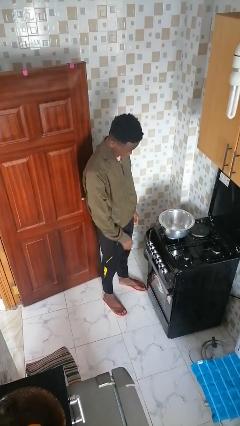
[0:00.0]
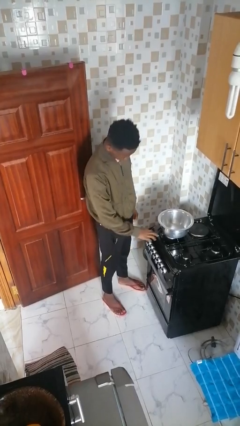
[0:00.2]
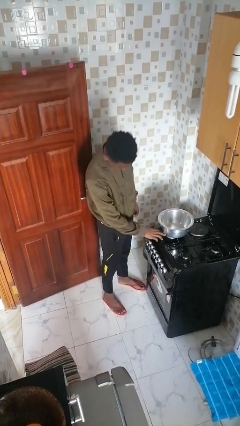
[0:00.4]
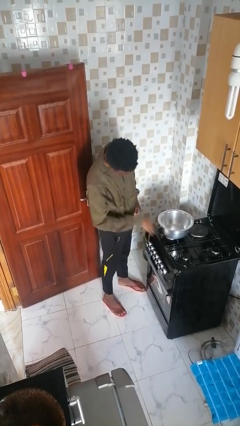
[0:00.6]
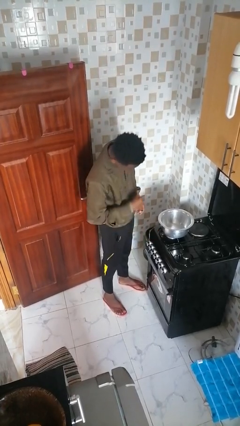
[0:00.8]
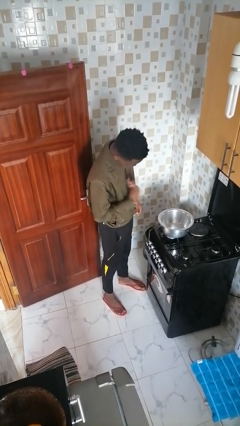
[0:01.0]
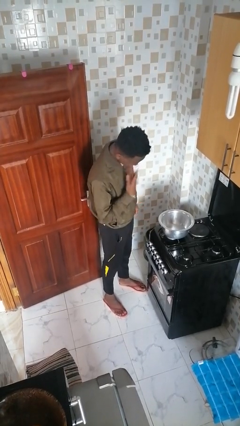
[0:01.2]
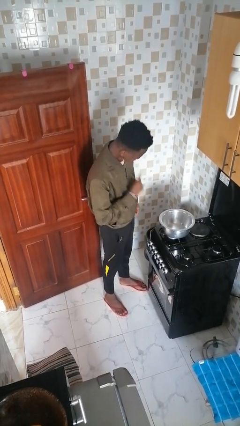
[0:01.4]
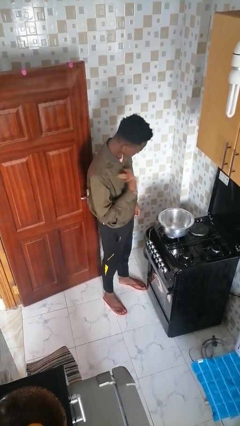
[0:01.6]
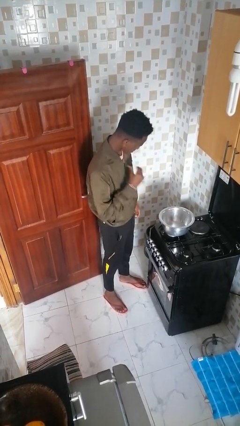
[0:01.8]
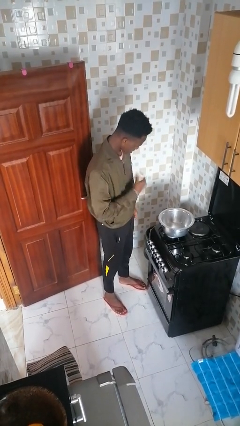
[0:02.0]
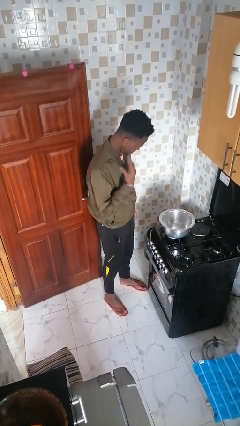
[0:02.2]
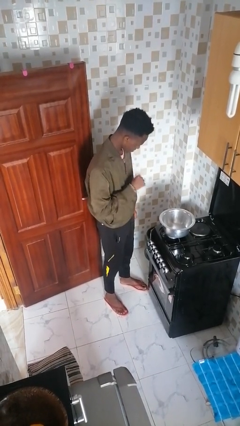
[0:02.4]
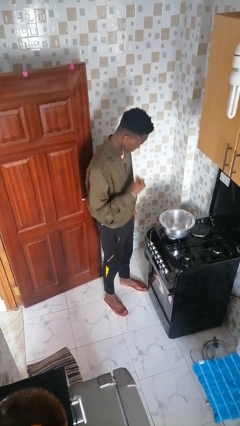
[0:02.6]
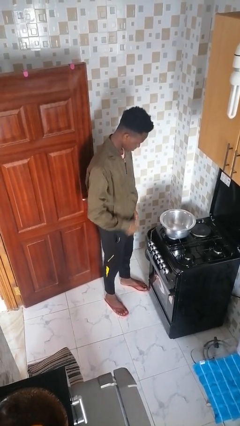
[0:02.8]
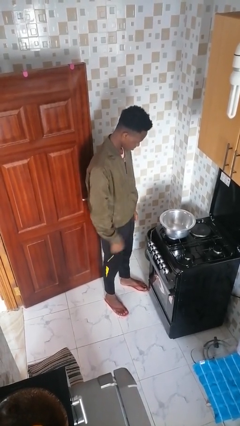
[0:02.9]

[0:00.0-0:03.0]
person burns hand

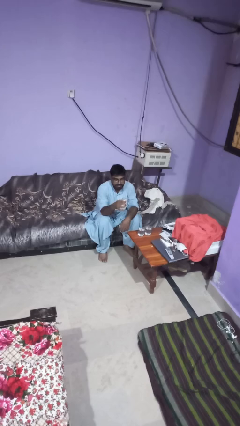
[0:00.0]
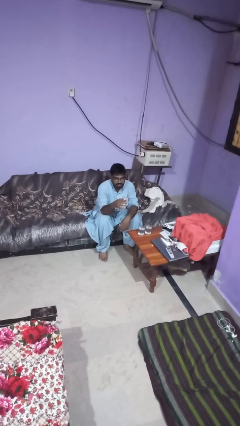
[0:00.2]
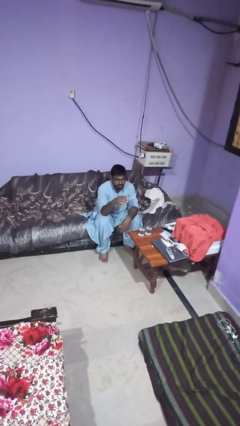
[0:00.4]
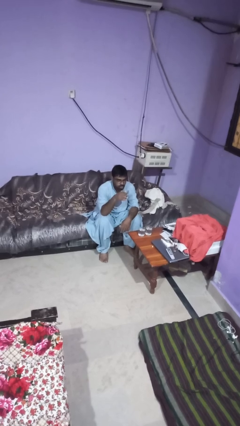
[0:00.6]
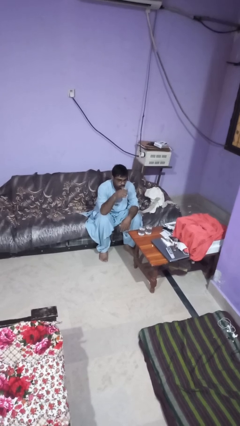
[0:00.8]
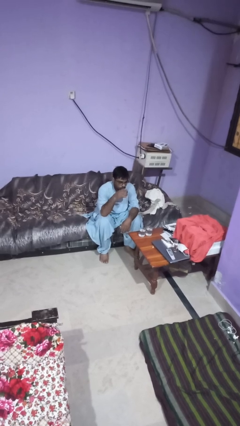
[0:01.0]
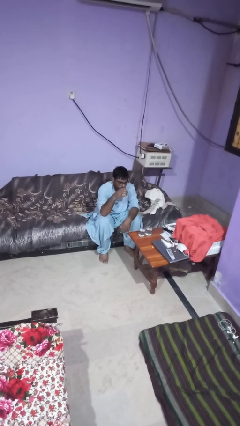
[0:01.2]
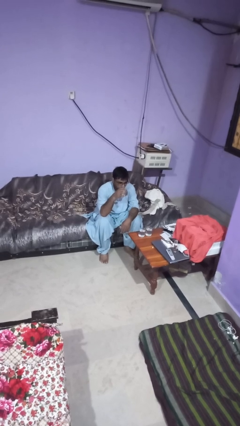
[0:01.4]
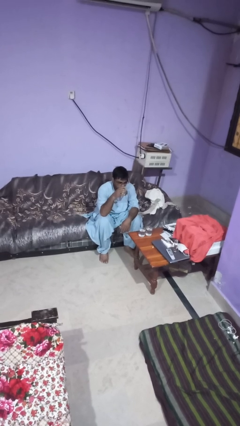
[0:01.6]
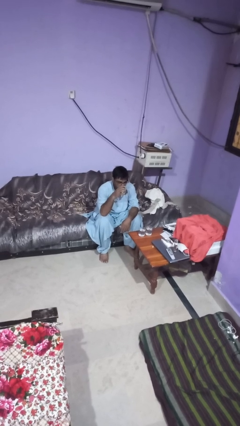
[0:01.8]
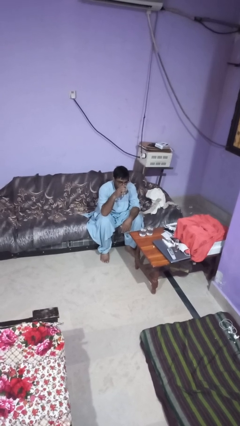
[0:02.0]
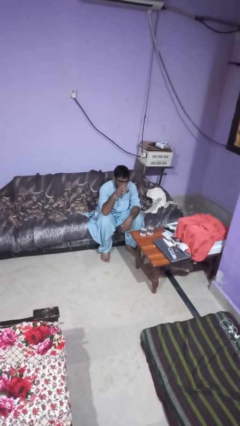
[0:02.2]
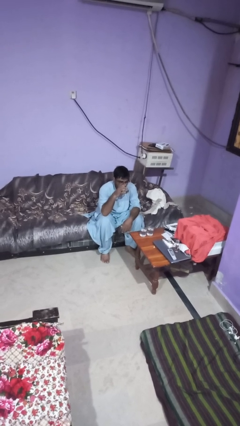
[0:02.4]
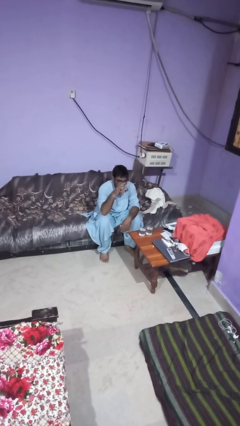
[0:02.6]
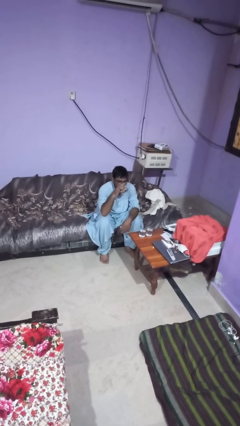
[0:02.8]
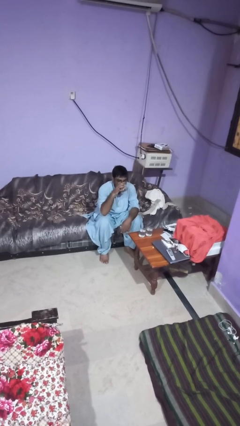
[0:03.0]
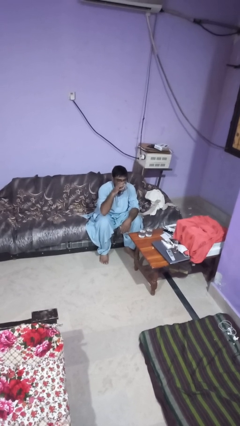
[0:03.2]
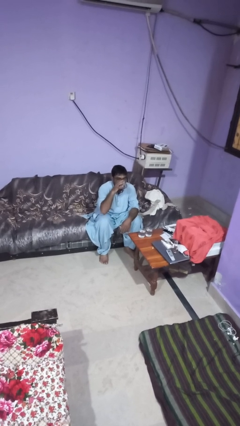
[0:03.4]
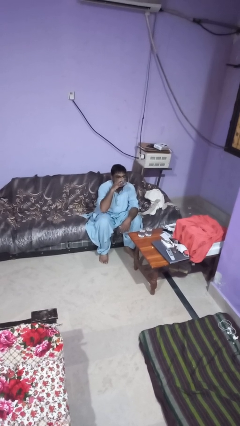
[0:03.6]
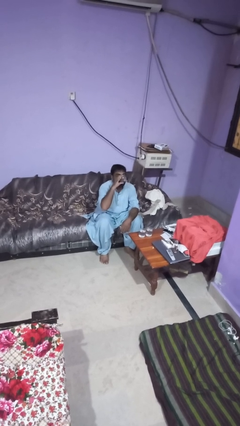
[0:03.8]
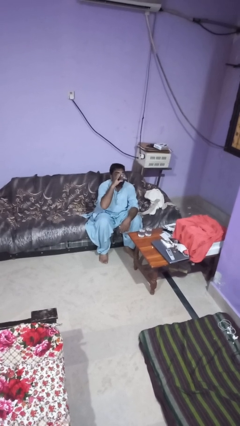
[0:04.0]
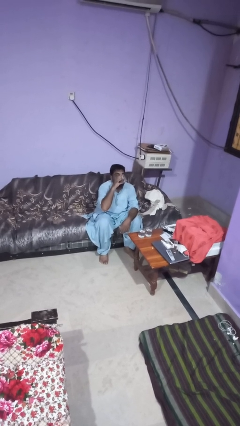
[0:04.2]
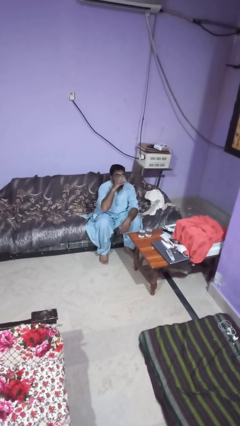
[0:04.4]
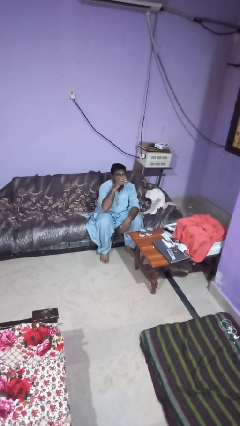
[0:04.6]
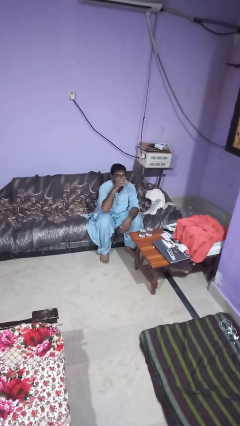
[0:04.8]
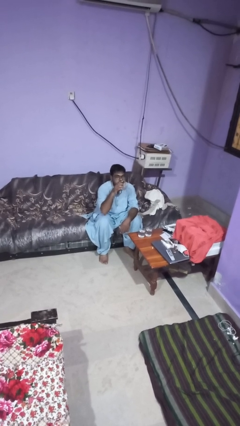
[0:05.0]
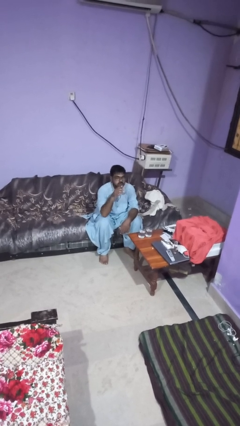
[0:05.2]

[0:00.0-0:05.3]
person drinks from shotglass

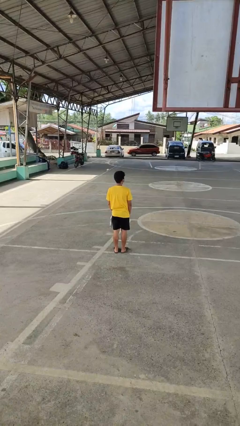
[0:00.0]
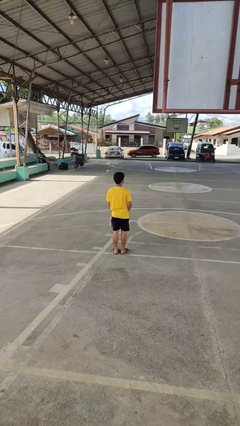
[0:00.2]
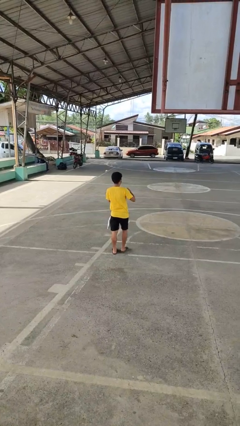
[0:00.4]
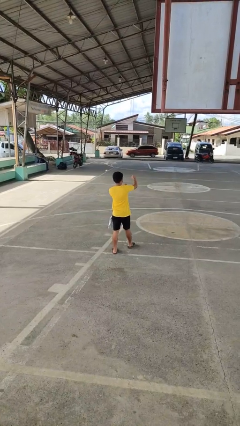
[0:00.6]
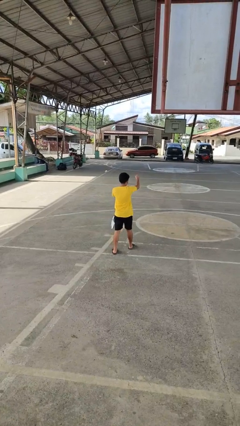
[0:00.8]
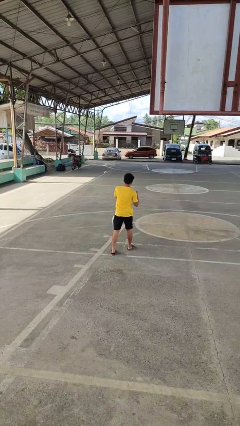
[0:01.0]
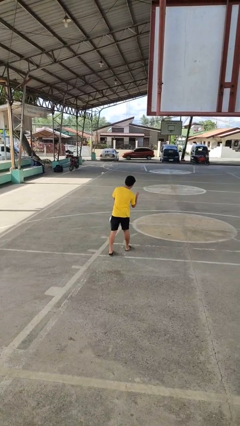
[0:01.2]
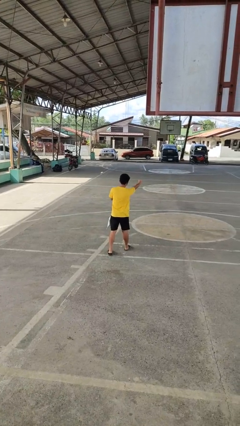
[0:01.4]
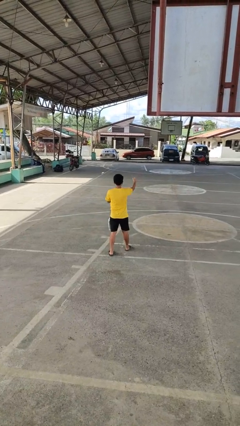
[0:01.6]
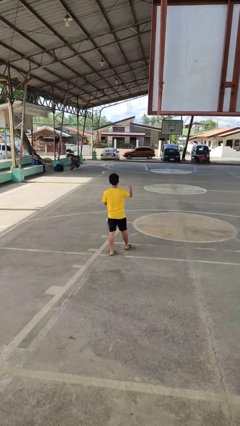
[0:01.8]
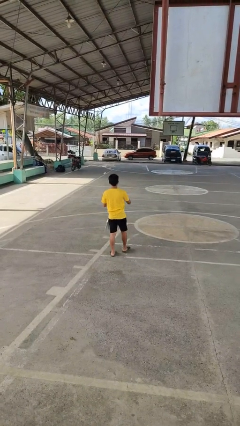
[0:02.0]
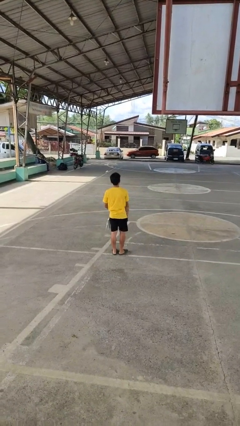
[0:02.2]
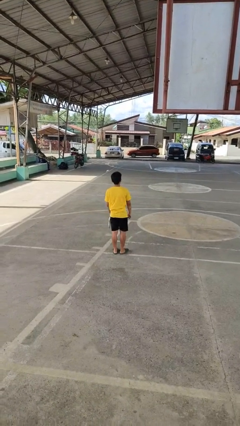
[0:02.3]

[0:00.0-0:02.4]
person punches

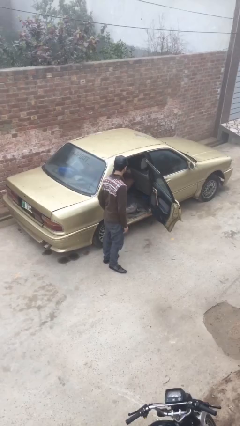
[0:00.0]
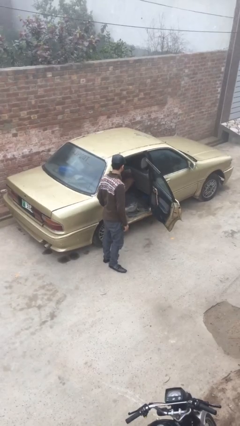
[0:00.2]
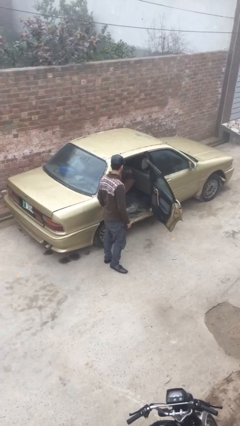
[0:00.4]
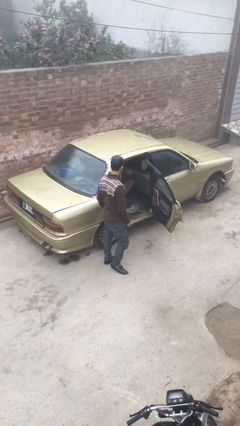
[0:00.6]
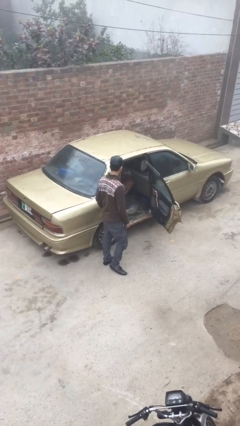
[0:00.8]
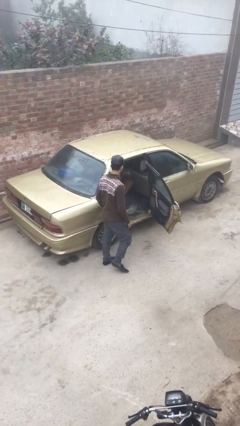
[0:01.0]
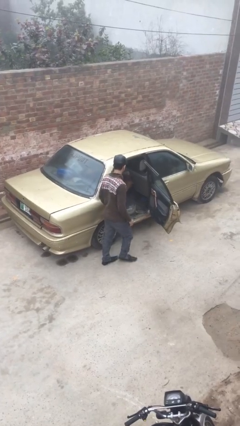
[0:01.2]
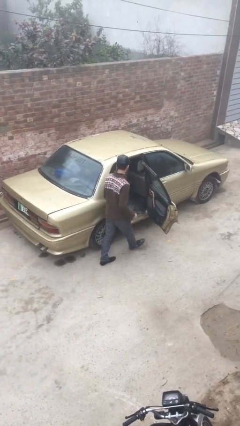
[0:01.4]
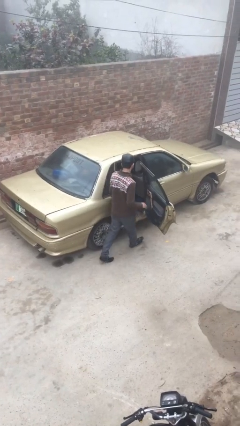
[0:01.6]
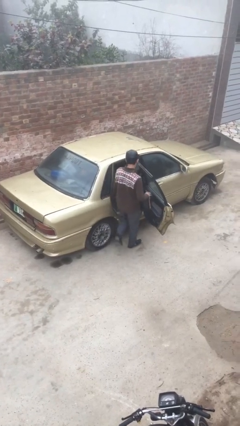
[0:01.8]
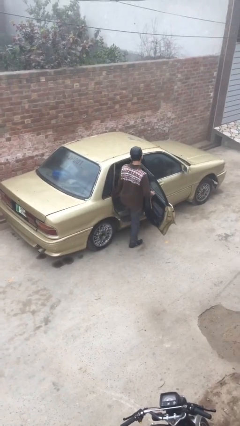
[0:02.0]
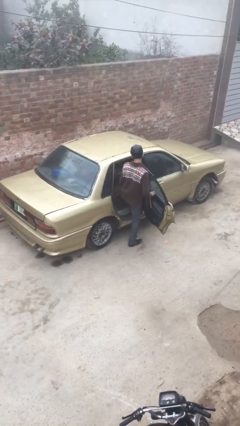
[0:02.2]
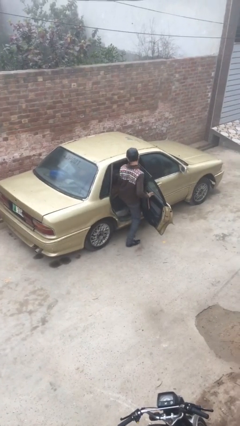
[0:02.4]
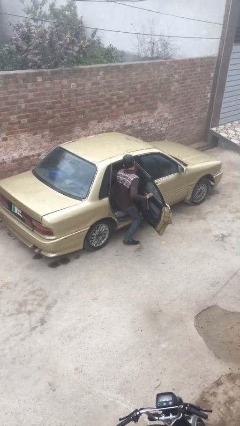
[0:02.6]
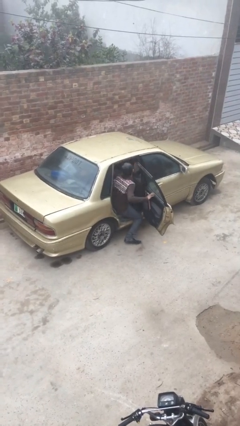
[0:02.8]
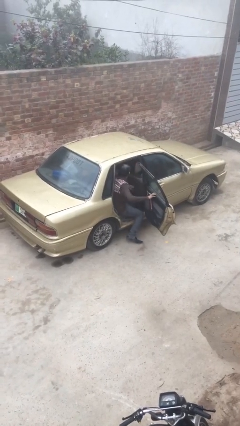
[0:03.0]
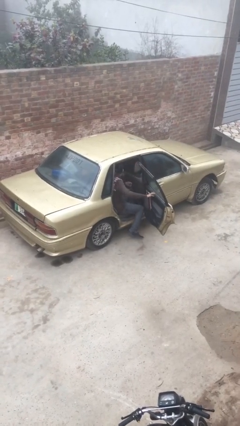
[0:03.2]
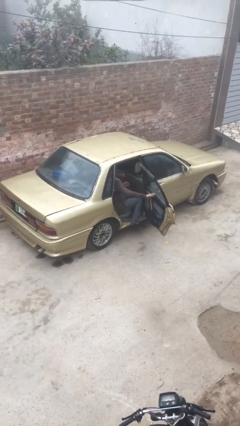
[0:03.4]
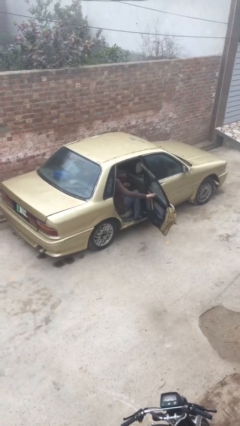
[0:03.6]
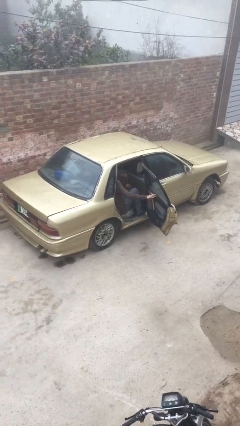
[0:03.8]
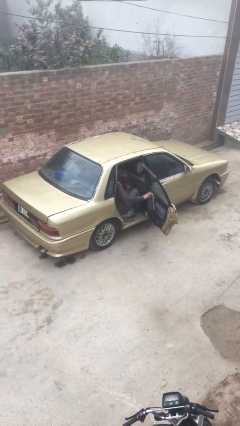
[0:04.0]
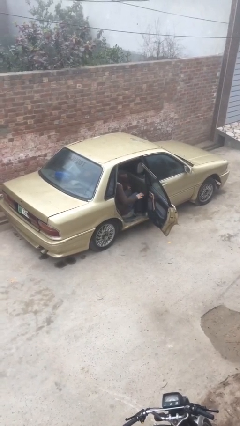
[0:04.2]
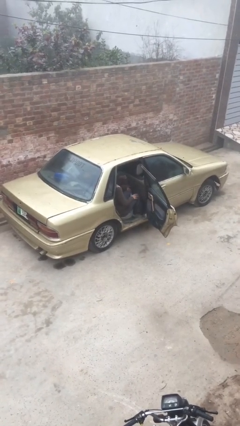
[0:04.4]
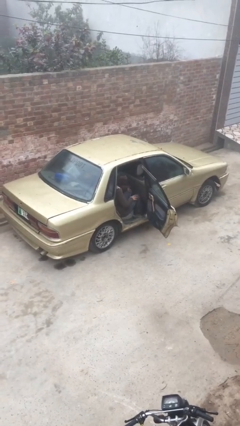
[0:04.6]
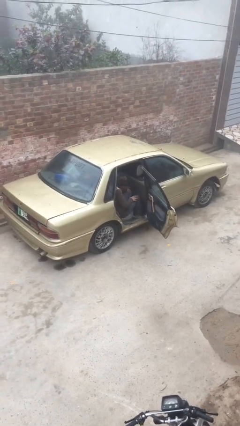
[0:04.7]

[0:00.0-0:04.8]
person enters car

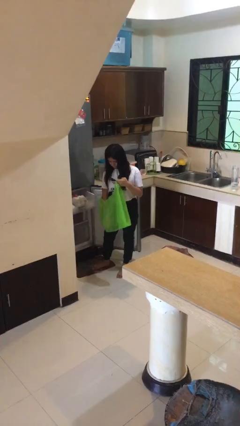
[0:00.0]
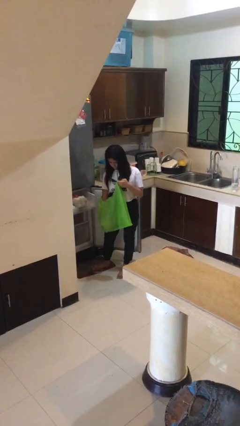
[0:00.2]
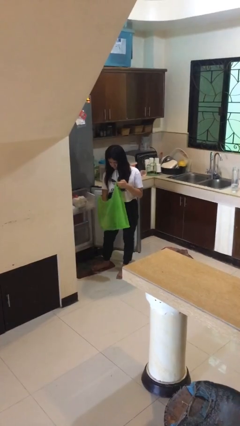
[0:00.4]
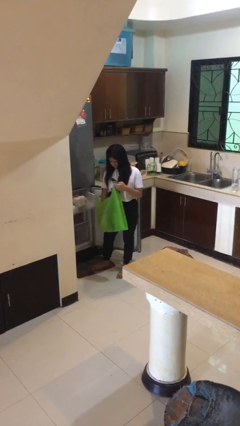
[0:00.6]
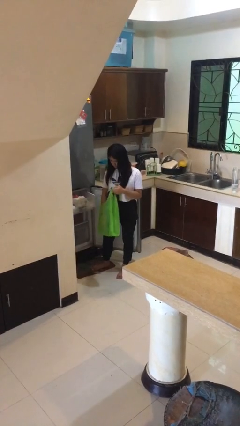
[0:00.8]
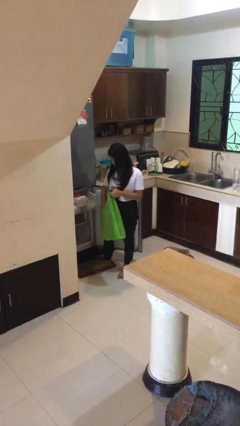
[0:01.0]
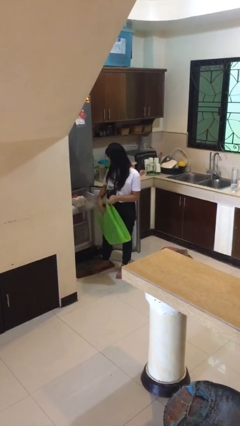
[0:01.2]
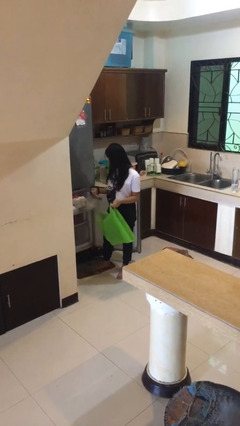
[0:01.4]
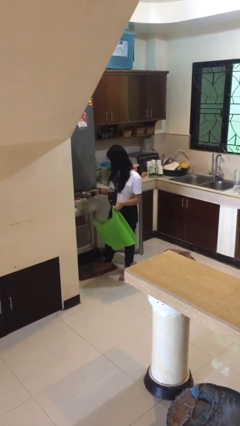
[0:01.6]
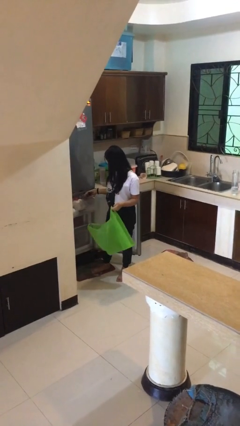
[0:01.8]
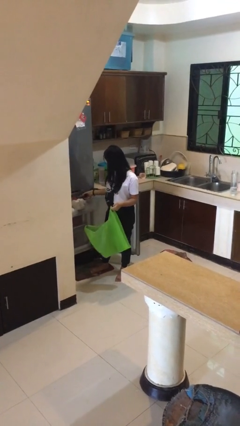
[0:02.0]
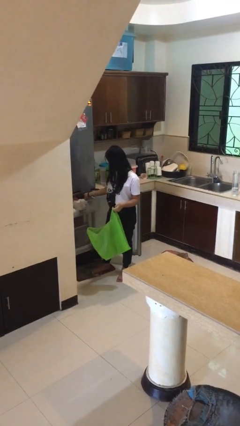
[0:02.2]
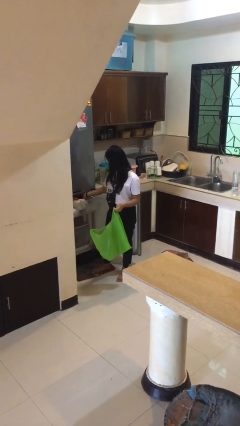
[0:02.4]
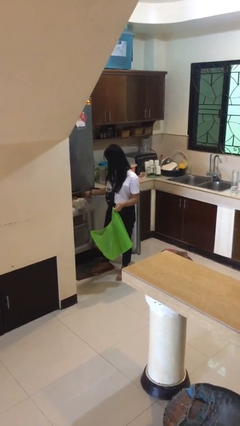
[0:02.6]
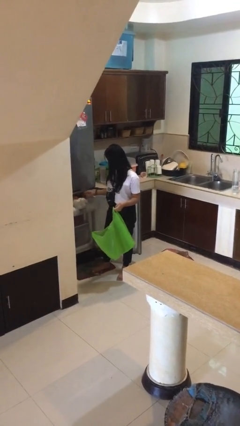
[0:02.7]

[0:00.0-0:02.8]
person loads groceries into refrigerator
